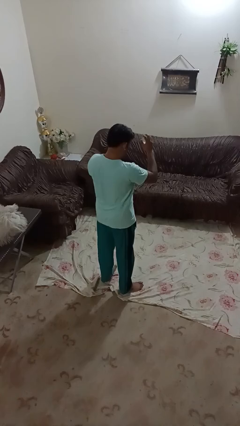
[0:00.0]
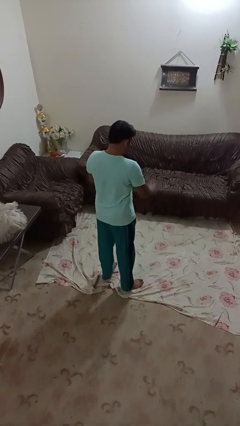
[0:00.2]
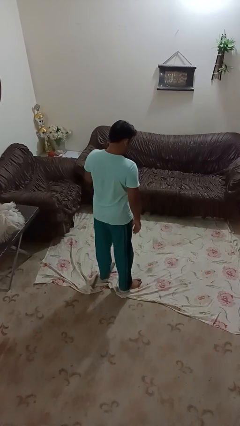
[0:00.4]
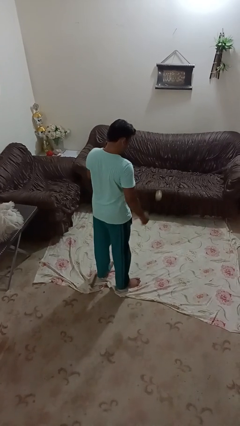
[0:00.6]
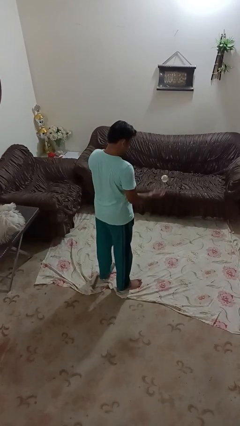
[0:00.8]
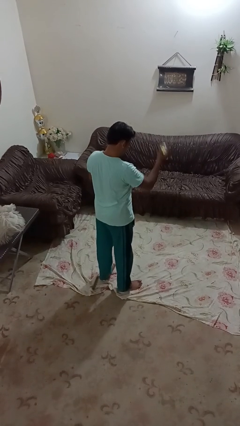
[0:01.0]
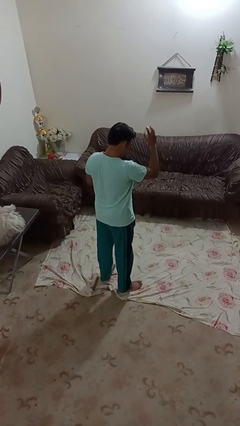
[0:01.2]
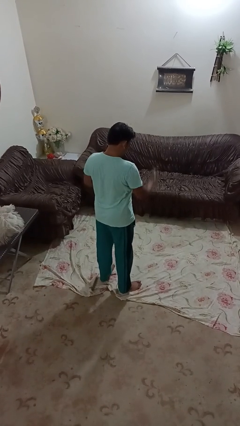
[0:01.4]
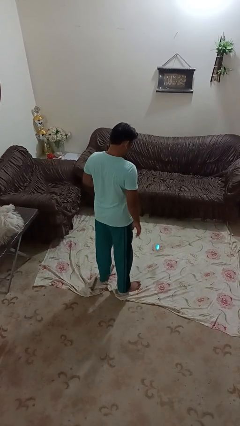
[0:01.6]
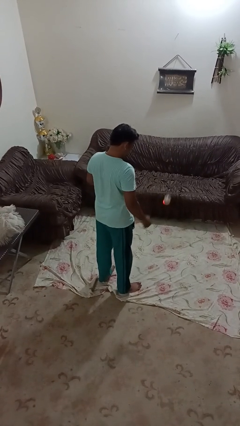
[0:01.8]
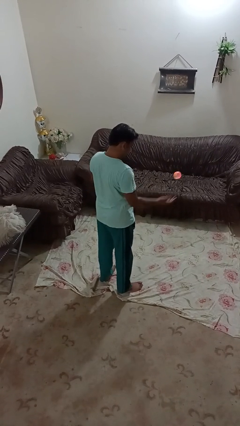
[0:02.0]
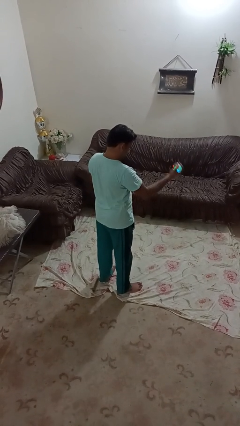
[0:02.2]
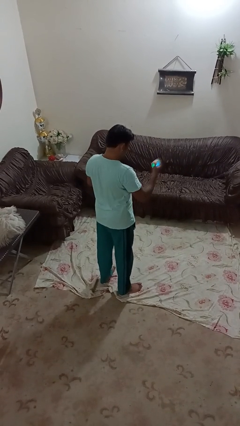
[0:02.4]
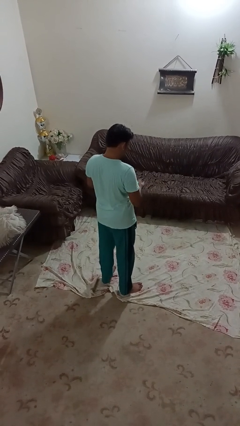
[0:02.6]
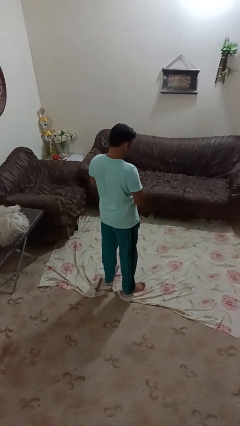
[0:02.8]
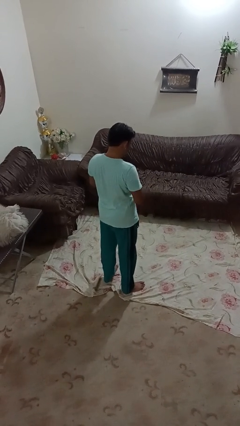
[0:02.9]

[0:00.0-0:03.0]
person bounces ball on floor

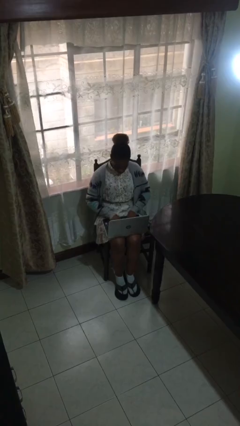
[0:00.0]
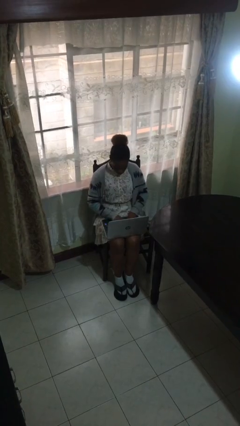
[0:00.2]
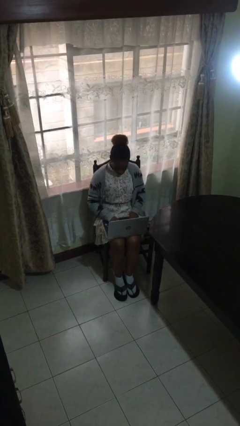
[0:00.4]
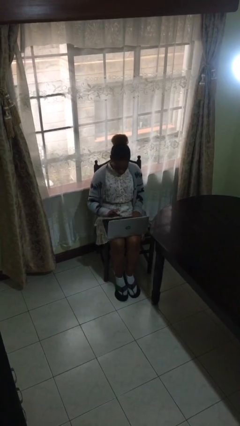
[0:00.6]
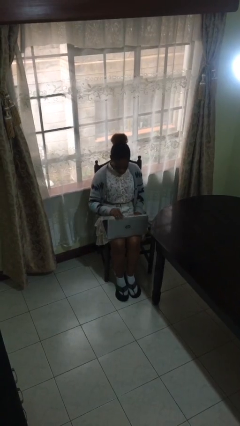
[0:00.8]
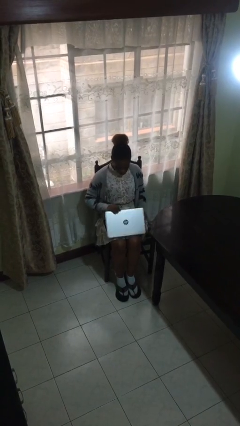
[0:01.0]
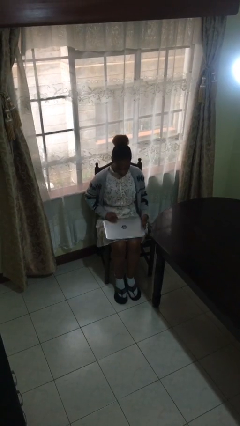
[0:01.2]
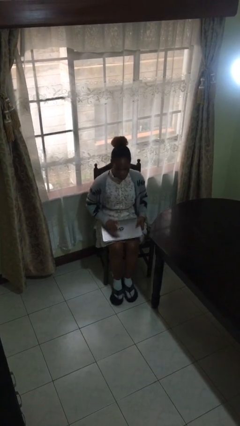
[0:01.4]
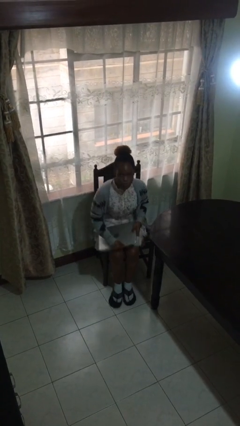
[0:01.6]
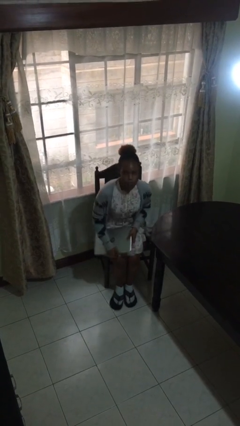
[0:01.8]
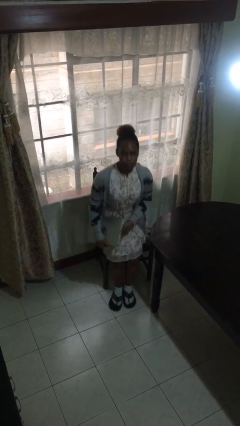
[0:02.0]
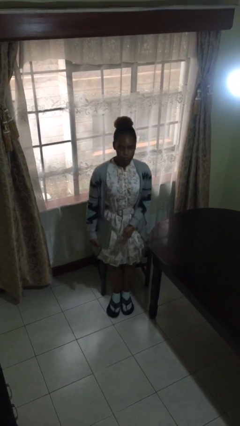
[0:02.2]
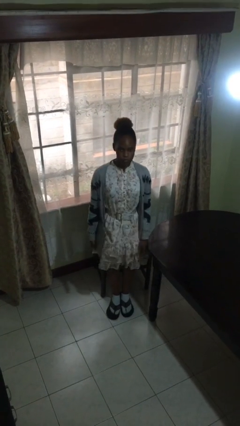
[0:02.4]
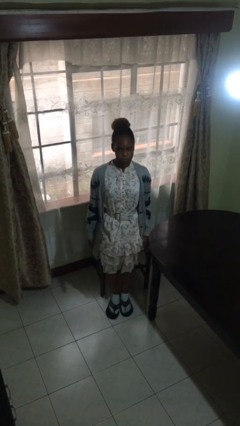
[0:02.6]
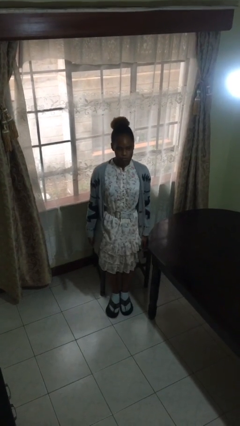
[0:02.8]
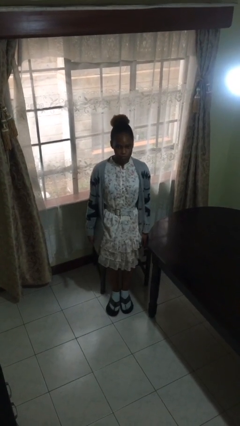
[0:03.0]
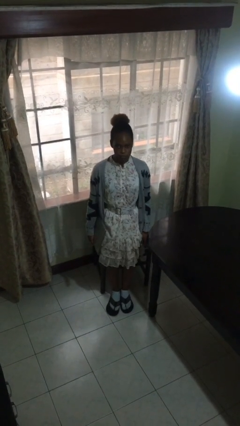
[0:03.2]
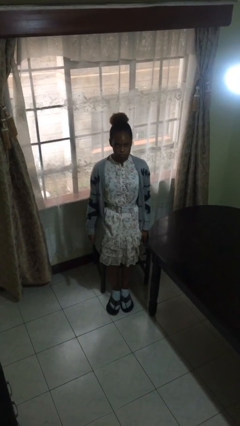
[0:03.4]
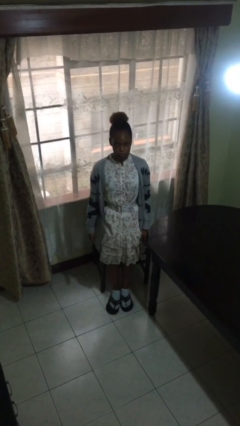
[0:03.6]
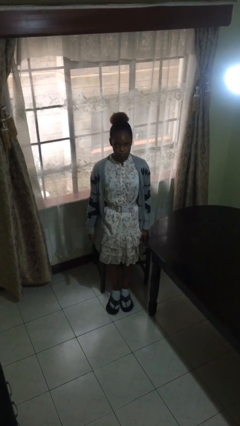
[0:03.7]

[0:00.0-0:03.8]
person stands up

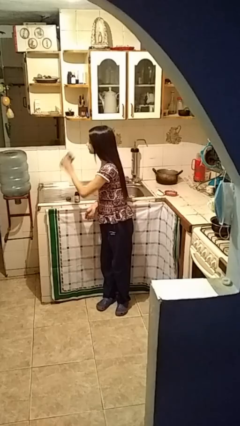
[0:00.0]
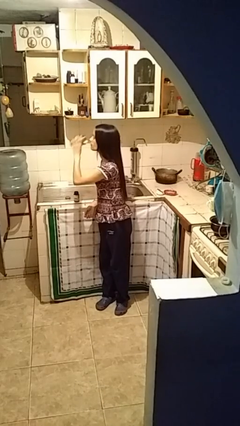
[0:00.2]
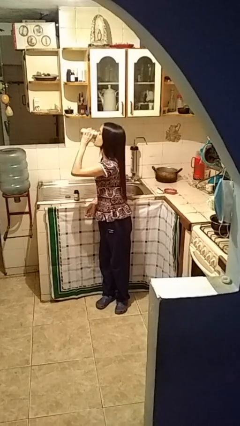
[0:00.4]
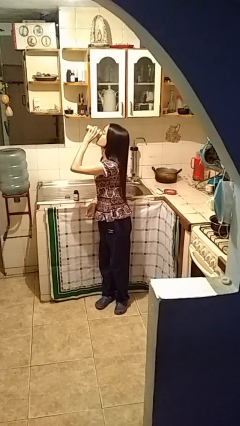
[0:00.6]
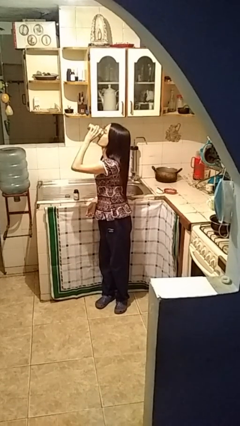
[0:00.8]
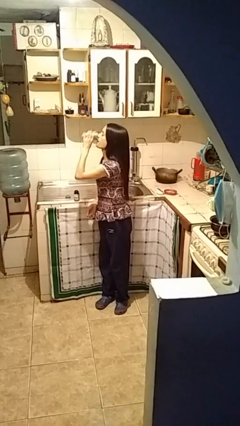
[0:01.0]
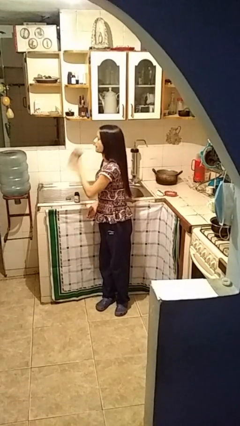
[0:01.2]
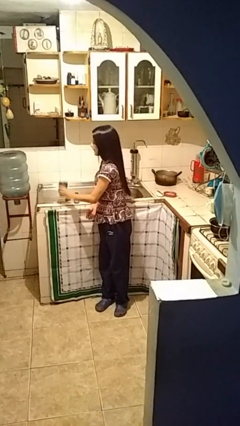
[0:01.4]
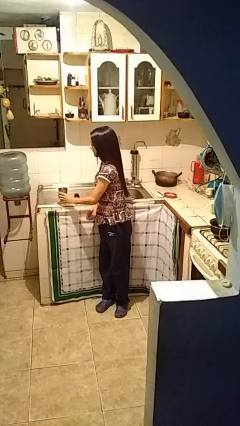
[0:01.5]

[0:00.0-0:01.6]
person drinks from cup

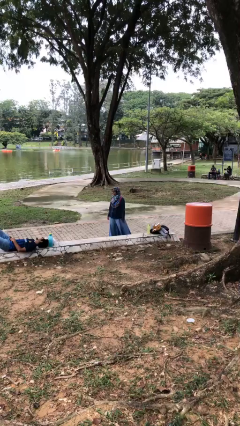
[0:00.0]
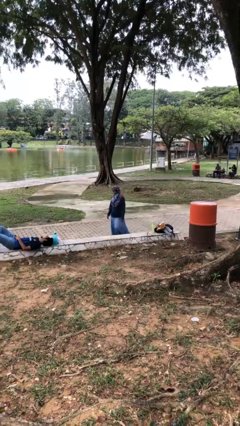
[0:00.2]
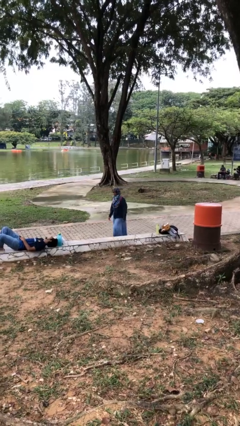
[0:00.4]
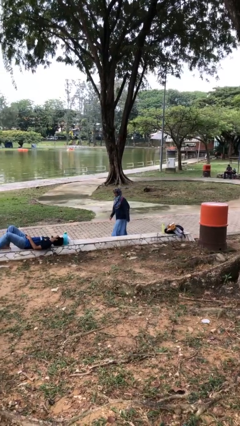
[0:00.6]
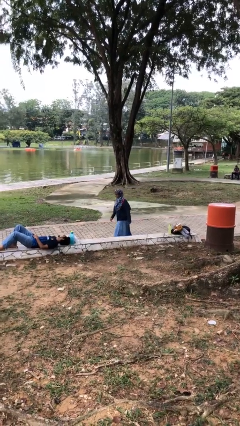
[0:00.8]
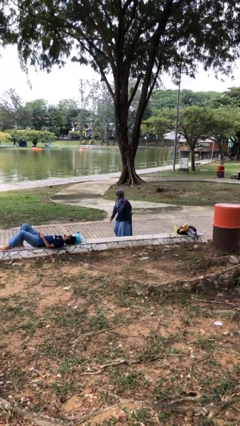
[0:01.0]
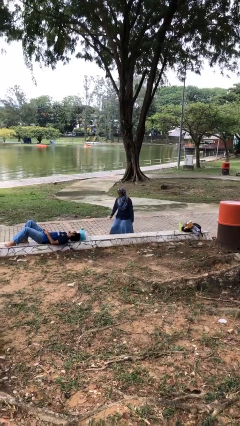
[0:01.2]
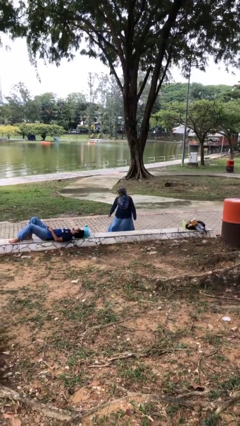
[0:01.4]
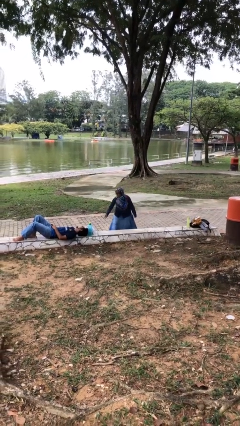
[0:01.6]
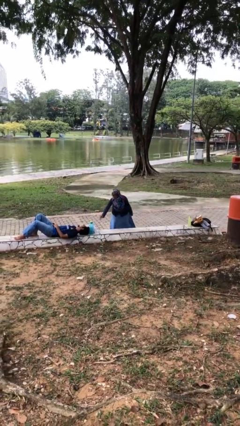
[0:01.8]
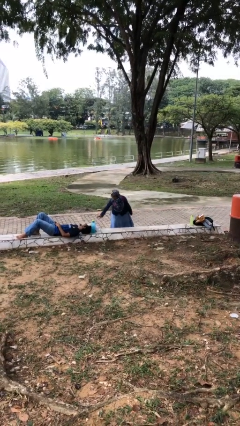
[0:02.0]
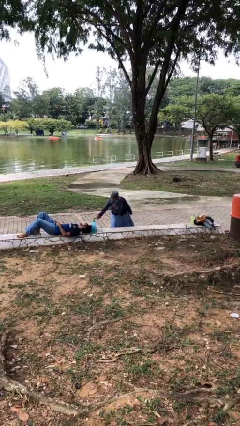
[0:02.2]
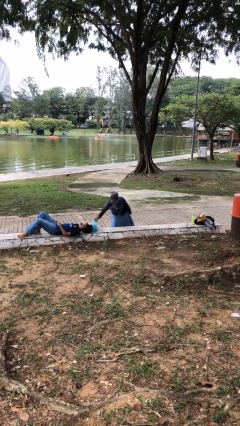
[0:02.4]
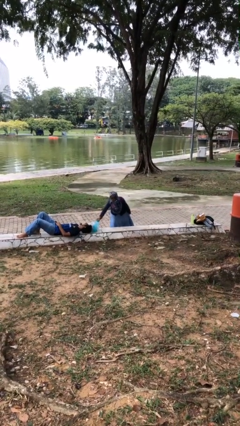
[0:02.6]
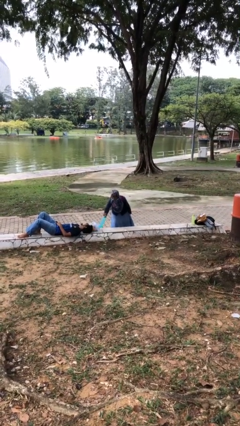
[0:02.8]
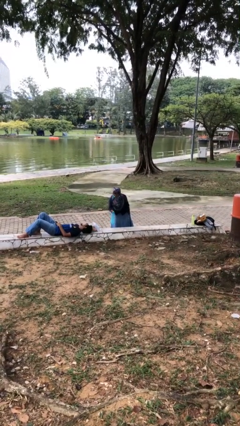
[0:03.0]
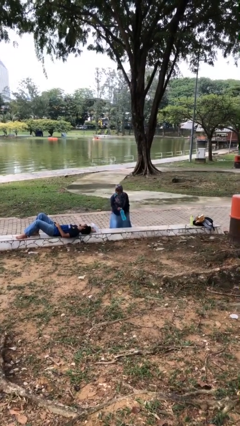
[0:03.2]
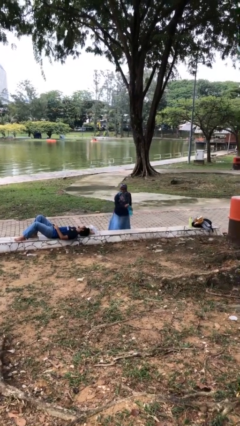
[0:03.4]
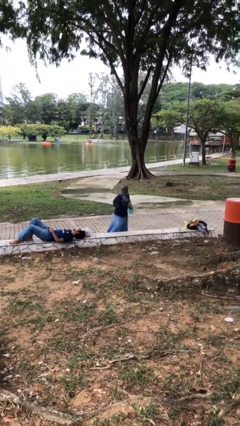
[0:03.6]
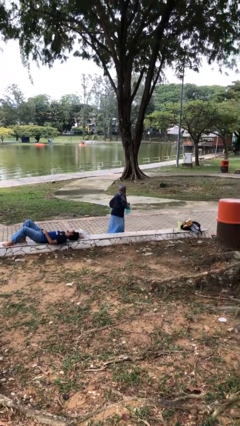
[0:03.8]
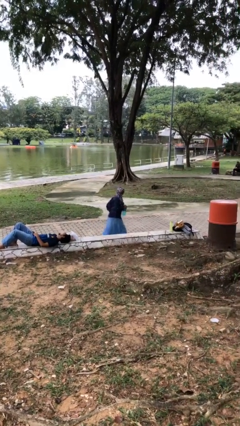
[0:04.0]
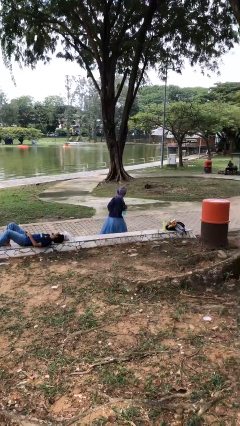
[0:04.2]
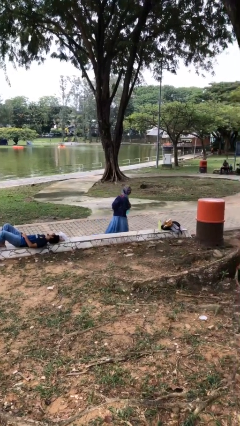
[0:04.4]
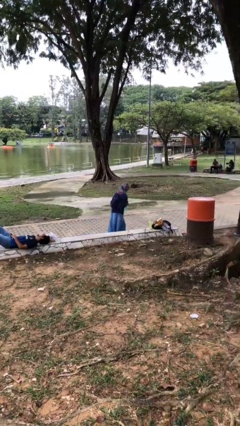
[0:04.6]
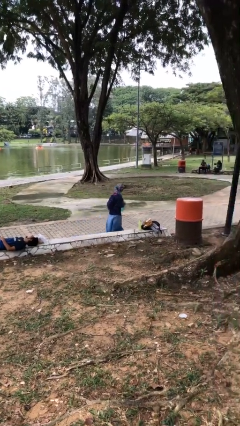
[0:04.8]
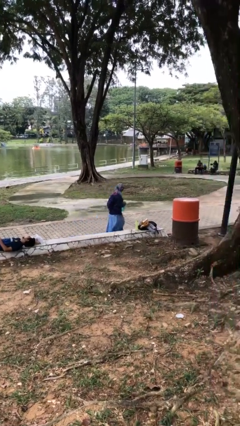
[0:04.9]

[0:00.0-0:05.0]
person steals object from person

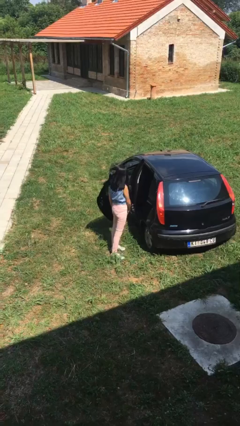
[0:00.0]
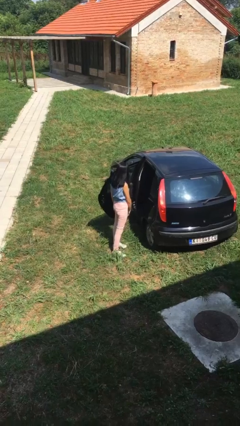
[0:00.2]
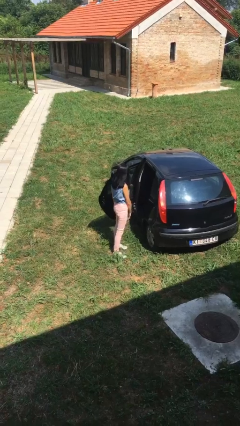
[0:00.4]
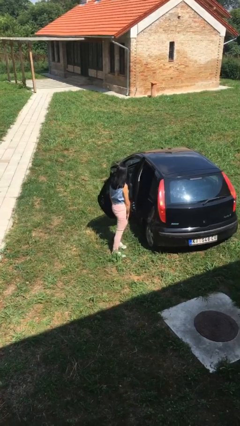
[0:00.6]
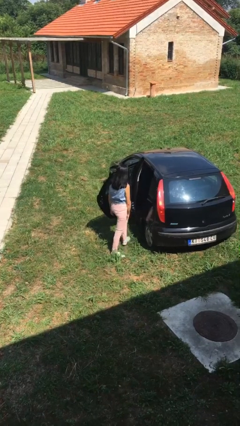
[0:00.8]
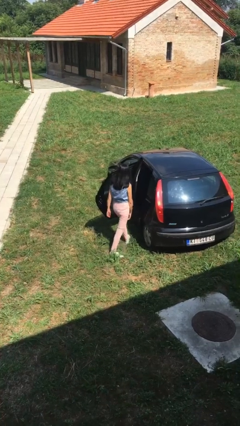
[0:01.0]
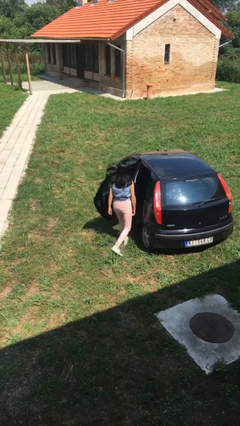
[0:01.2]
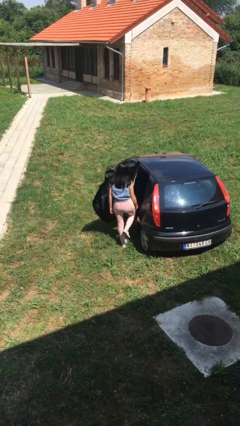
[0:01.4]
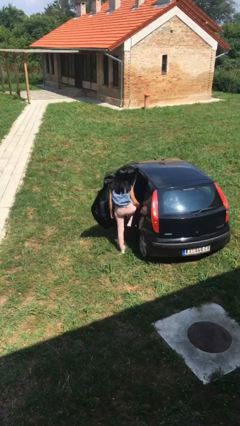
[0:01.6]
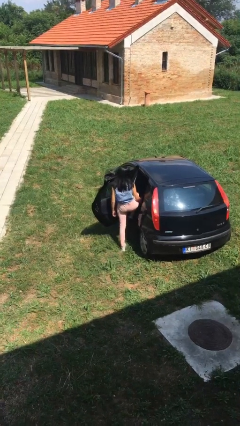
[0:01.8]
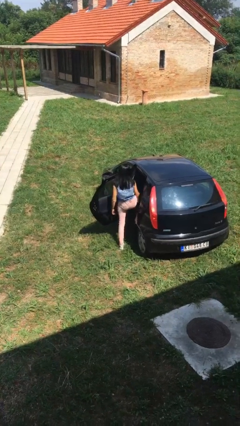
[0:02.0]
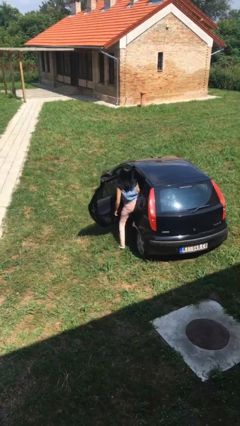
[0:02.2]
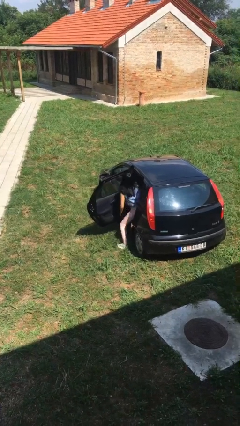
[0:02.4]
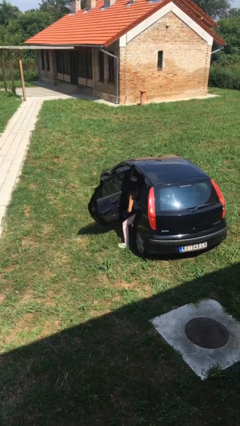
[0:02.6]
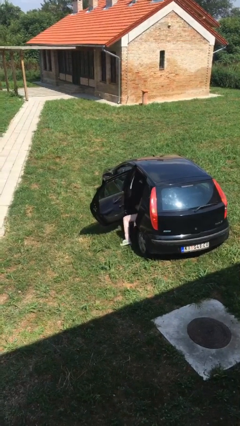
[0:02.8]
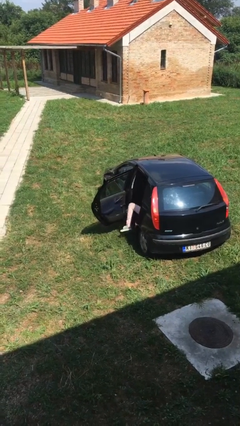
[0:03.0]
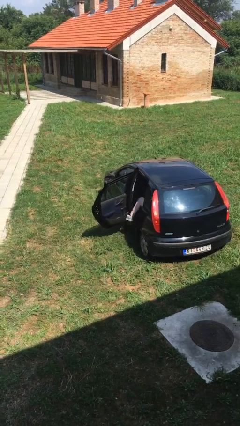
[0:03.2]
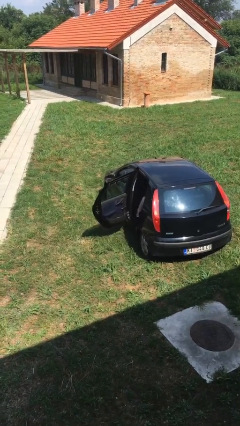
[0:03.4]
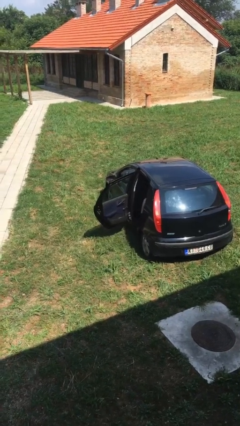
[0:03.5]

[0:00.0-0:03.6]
person enters car

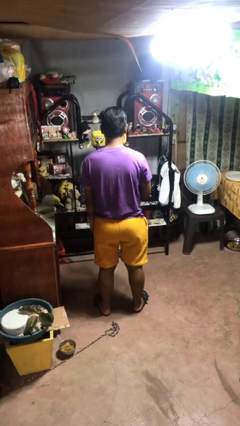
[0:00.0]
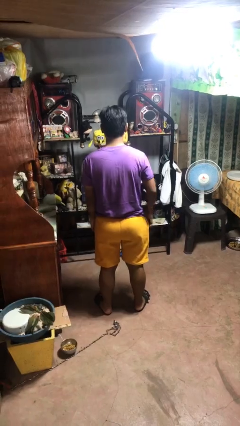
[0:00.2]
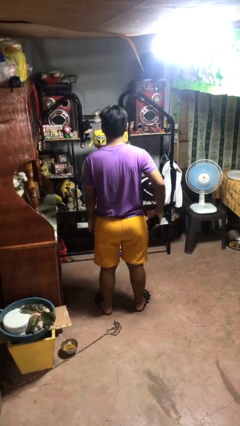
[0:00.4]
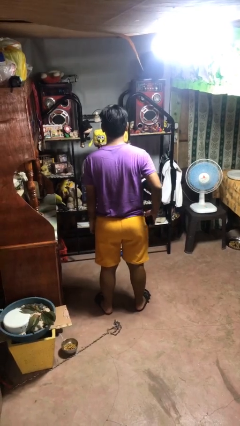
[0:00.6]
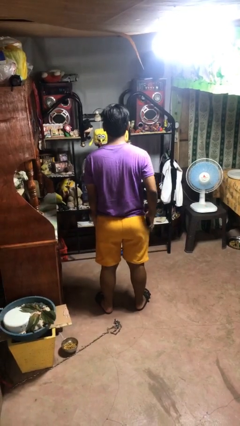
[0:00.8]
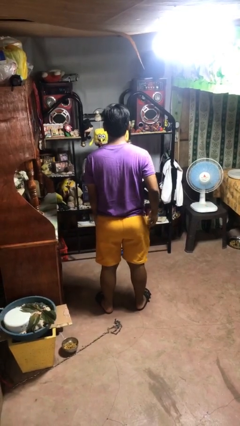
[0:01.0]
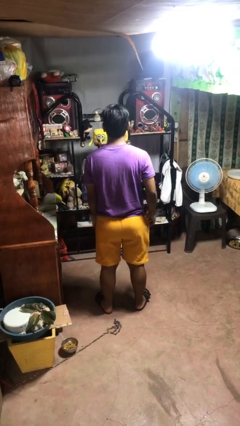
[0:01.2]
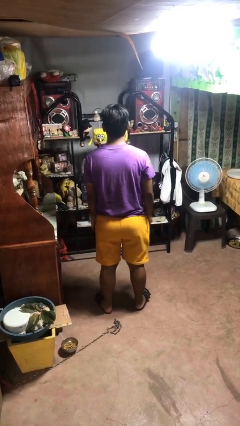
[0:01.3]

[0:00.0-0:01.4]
person puts phone into pocket
